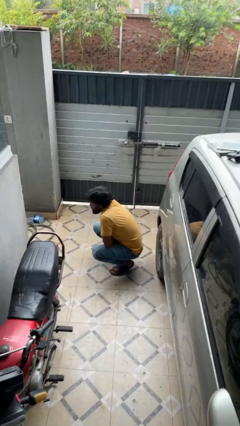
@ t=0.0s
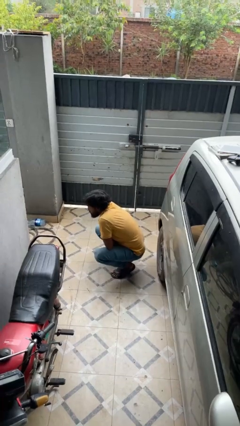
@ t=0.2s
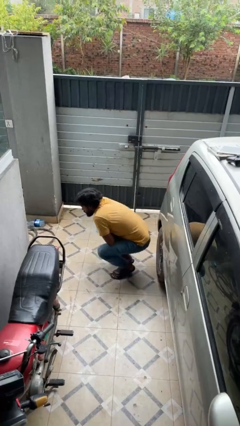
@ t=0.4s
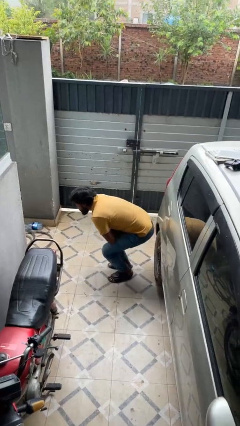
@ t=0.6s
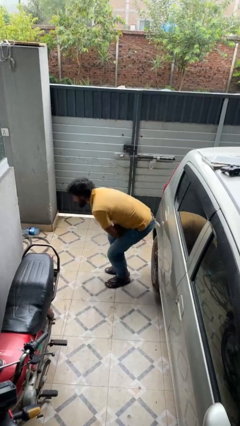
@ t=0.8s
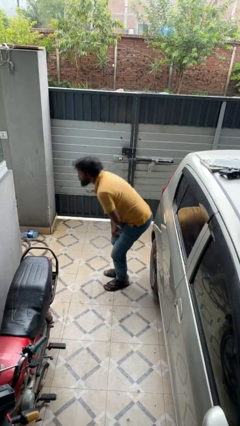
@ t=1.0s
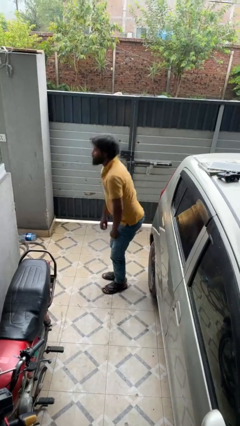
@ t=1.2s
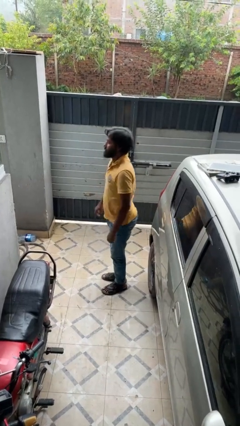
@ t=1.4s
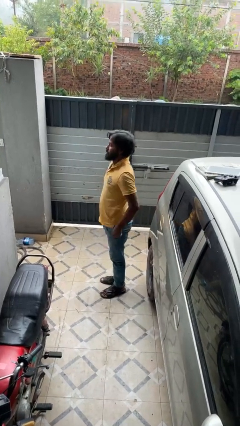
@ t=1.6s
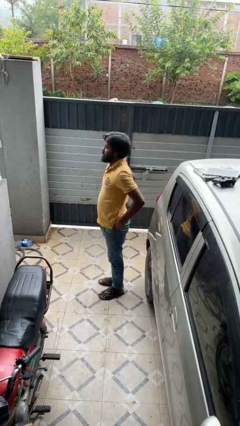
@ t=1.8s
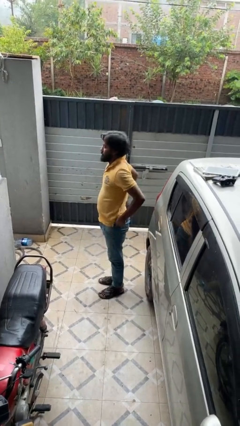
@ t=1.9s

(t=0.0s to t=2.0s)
person stands up

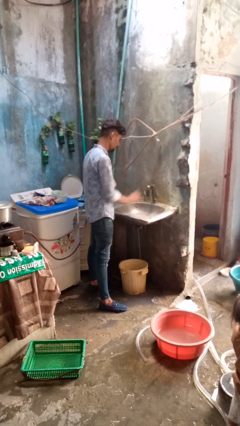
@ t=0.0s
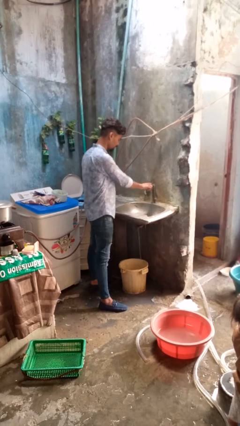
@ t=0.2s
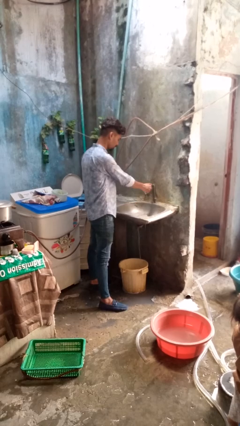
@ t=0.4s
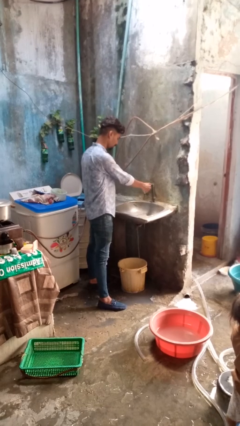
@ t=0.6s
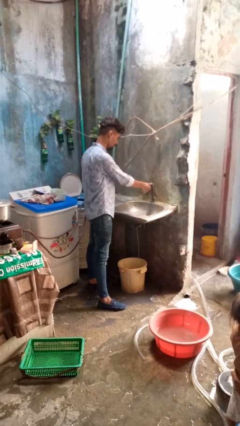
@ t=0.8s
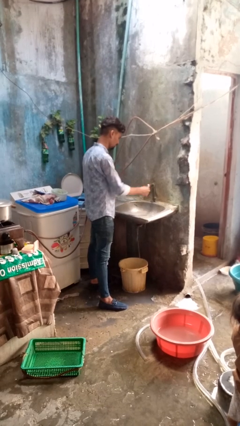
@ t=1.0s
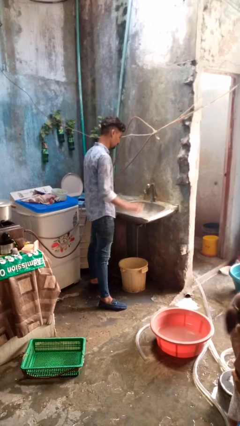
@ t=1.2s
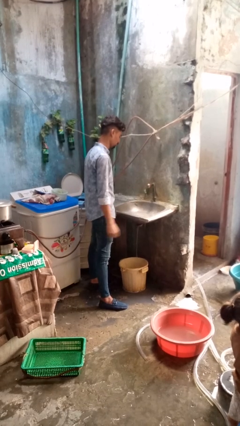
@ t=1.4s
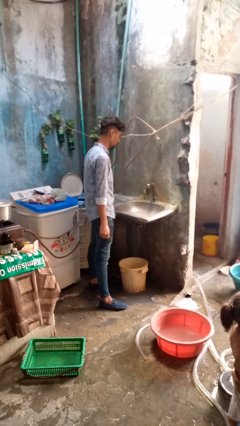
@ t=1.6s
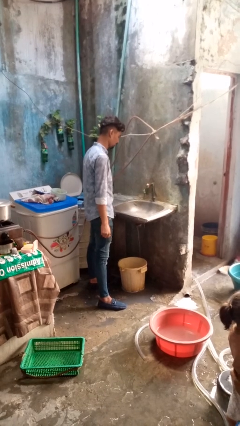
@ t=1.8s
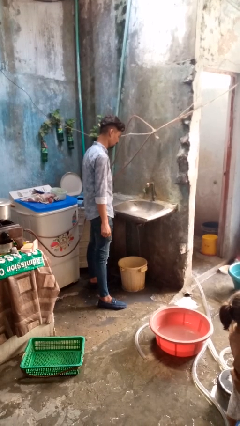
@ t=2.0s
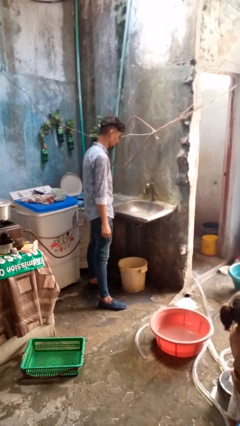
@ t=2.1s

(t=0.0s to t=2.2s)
person turns off faucet

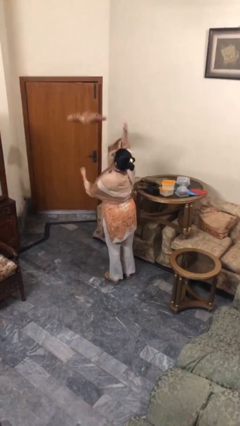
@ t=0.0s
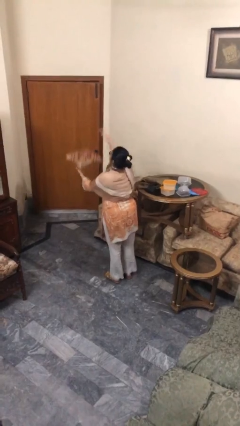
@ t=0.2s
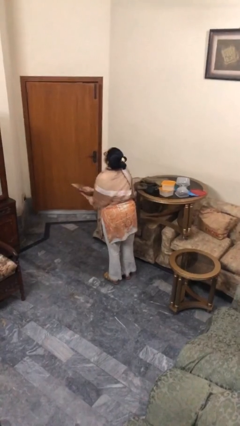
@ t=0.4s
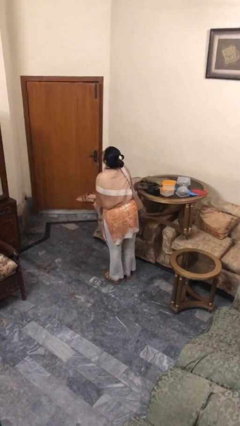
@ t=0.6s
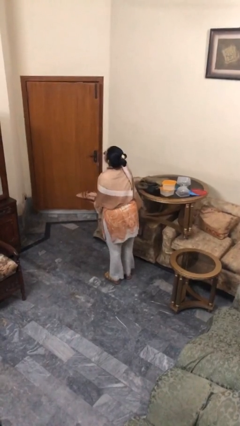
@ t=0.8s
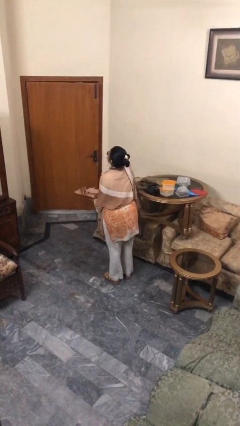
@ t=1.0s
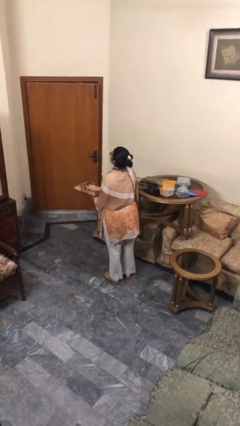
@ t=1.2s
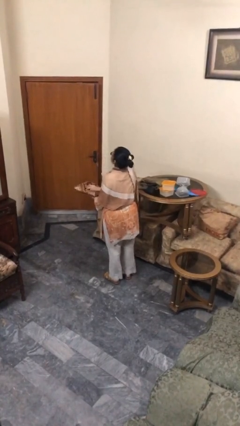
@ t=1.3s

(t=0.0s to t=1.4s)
person catches dropped object

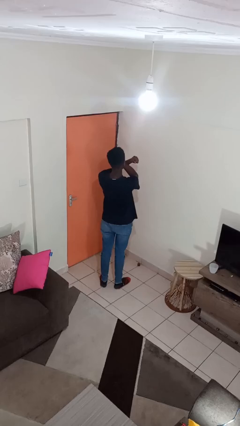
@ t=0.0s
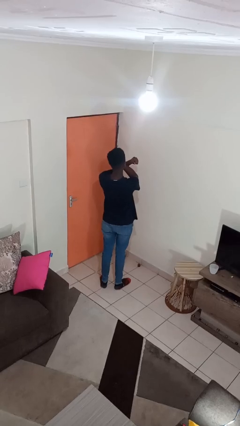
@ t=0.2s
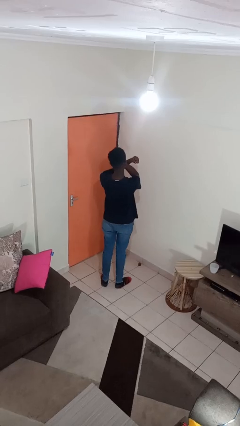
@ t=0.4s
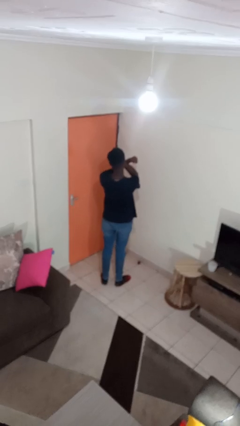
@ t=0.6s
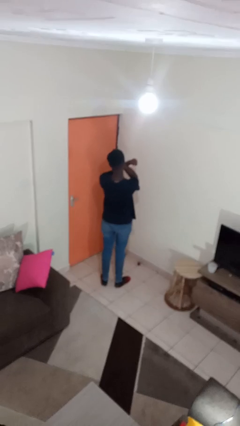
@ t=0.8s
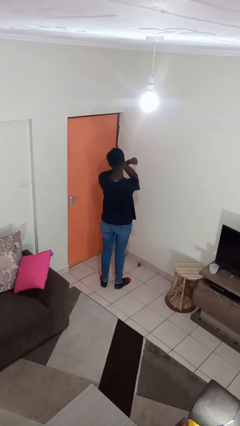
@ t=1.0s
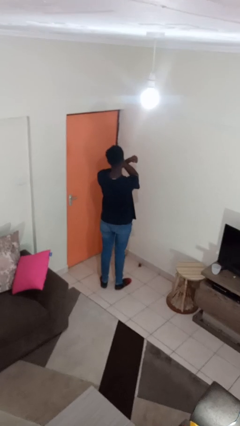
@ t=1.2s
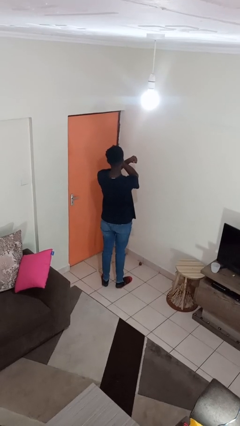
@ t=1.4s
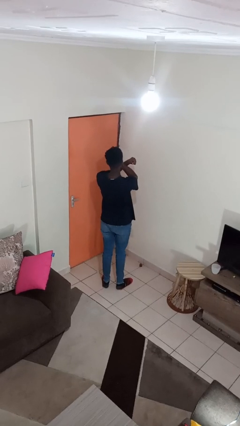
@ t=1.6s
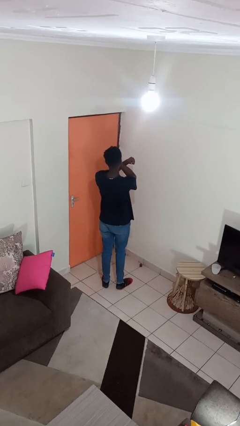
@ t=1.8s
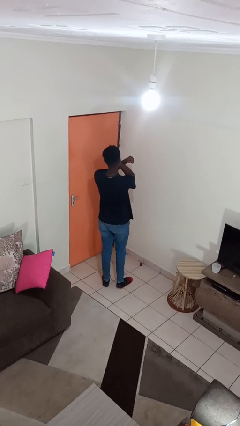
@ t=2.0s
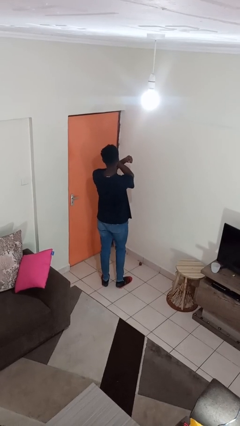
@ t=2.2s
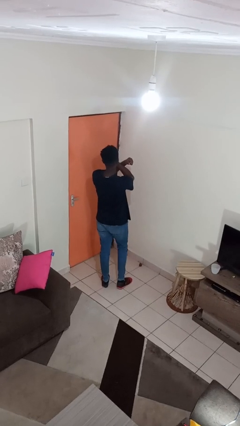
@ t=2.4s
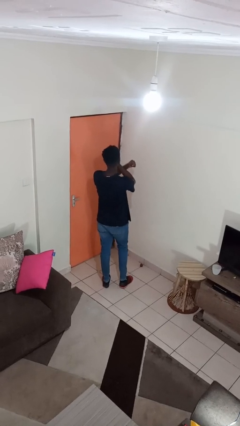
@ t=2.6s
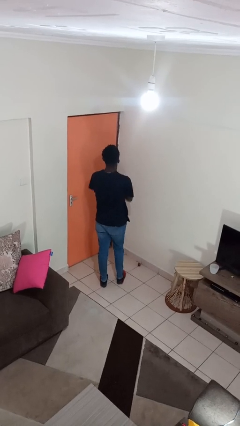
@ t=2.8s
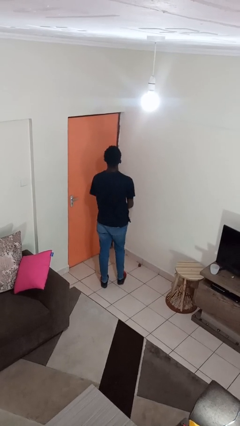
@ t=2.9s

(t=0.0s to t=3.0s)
person gestures arms x

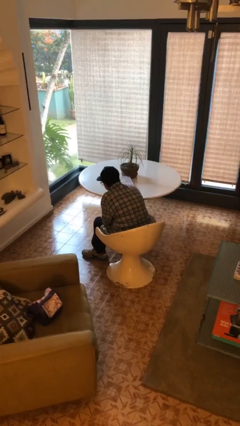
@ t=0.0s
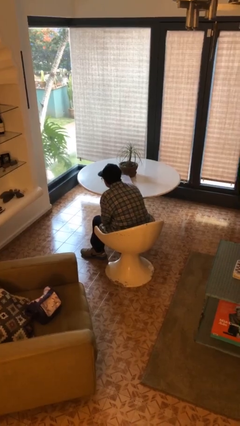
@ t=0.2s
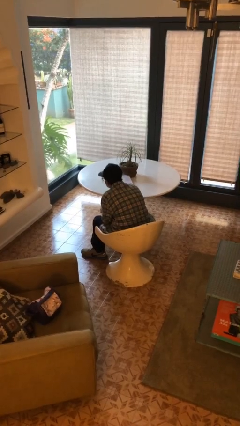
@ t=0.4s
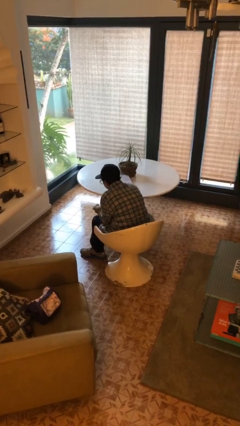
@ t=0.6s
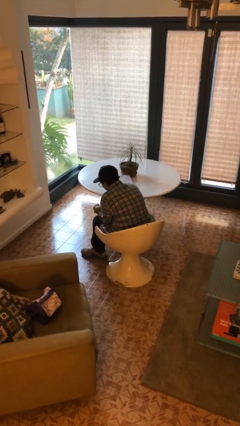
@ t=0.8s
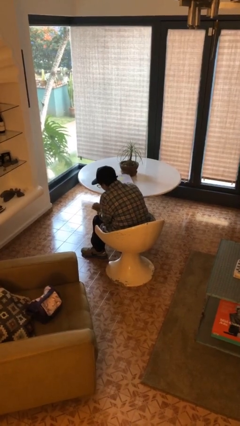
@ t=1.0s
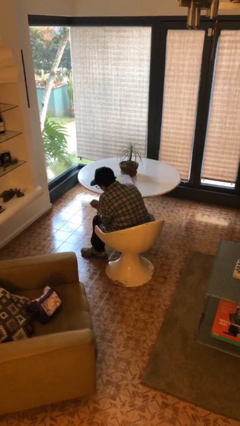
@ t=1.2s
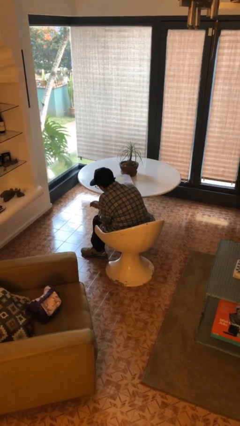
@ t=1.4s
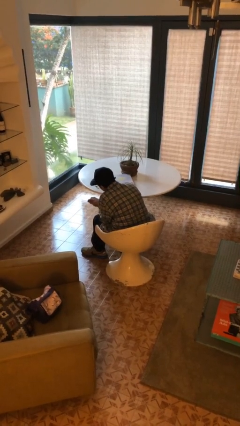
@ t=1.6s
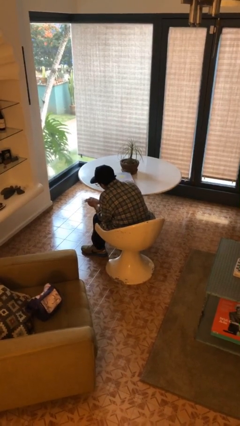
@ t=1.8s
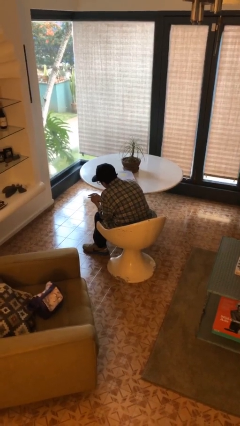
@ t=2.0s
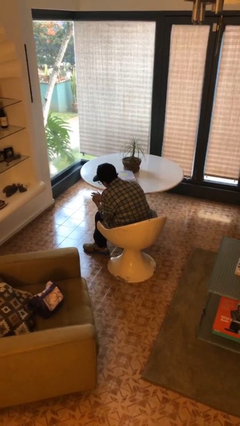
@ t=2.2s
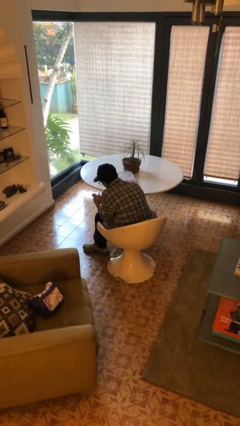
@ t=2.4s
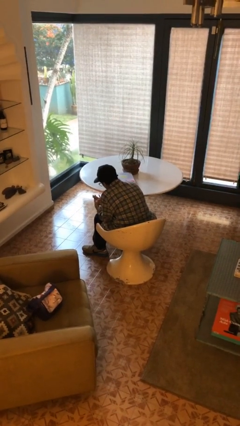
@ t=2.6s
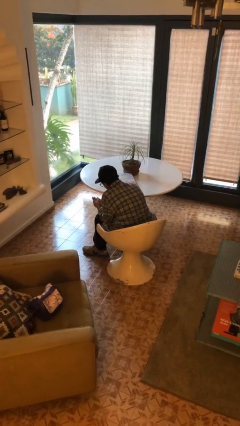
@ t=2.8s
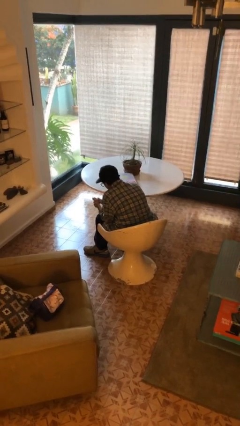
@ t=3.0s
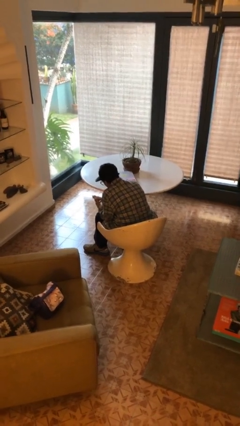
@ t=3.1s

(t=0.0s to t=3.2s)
person looks at hands in lap

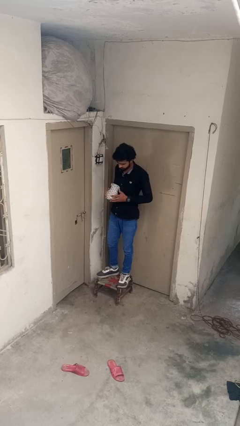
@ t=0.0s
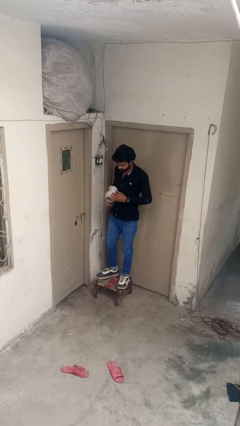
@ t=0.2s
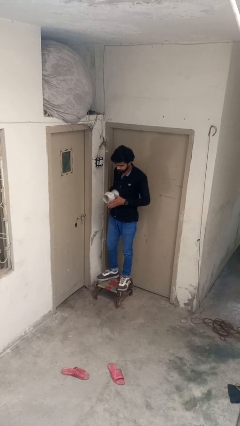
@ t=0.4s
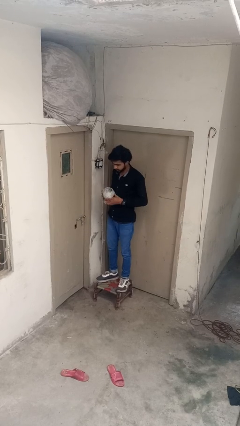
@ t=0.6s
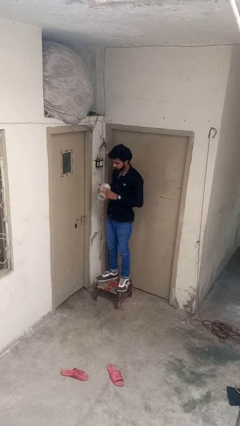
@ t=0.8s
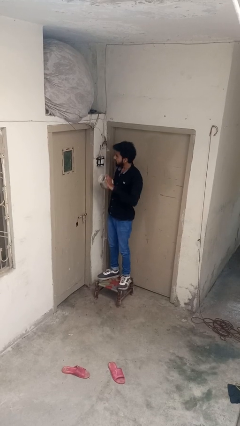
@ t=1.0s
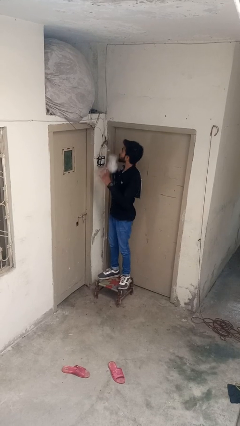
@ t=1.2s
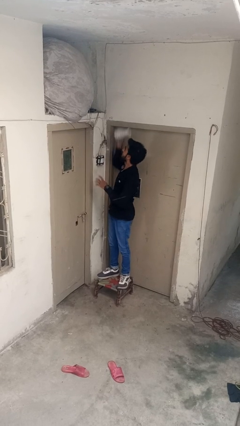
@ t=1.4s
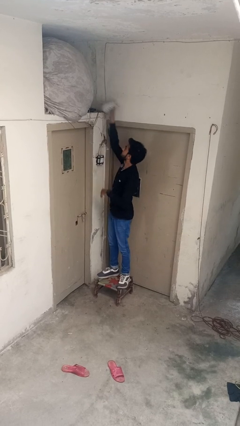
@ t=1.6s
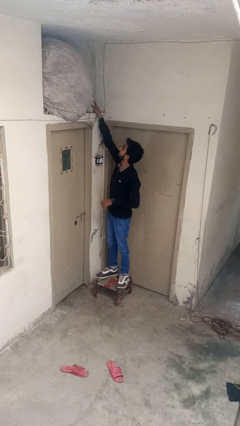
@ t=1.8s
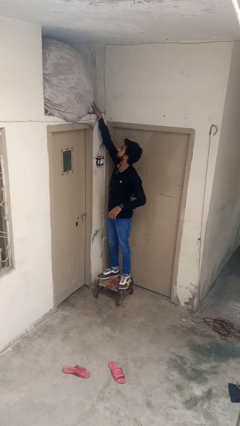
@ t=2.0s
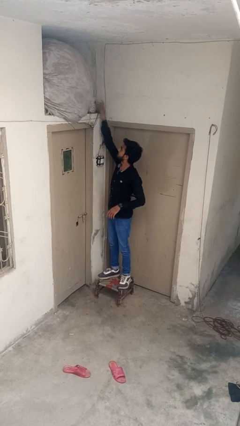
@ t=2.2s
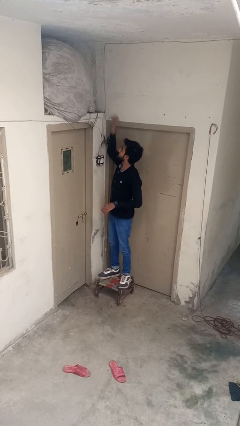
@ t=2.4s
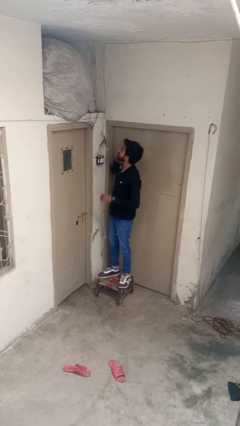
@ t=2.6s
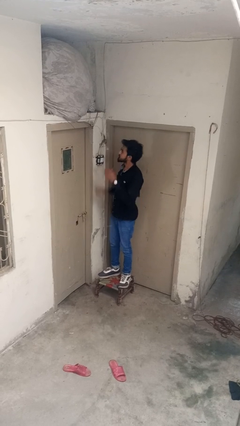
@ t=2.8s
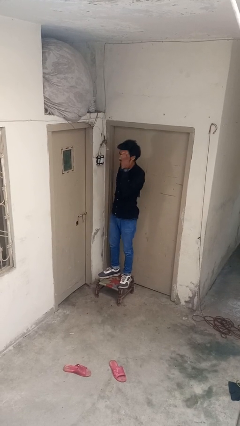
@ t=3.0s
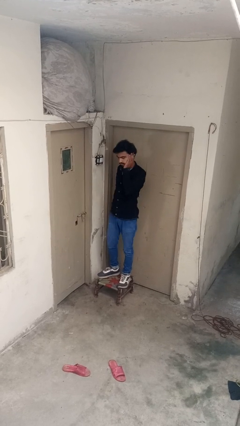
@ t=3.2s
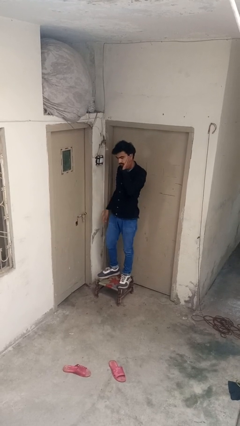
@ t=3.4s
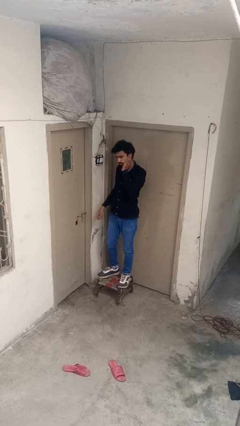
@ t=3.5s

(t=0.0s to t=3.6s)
person puts down object on shelf

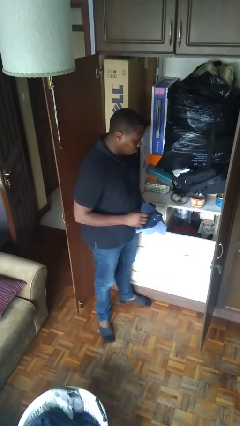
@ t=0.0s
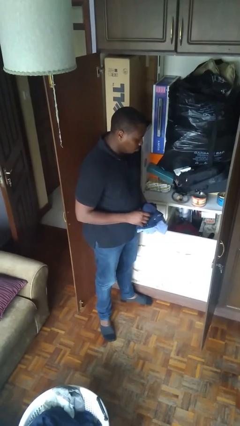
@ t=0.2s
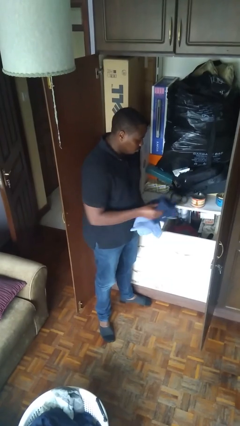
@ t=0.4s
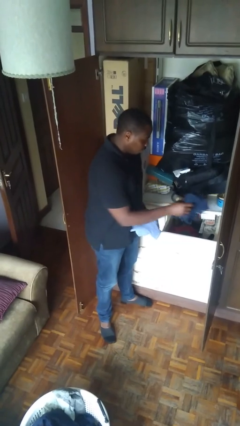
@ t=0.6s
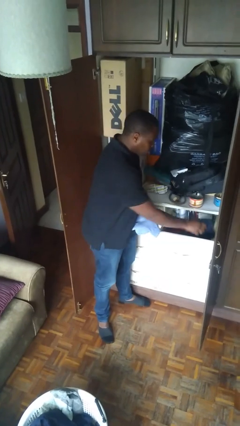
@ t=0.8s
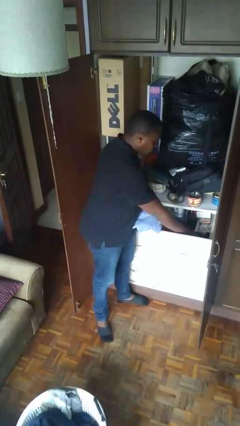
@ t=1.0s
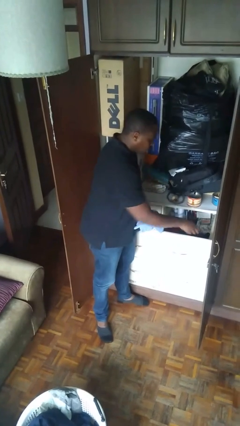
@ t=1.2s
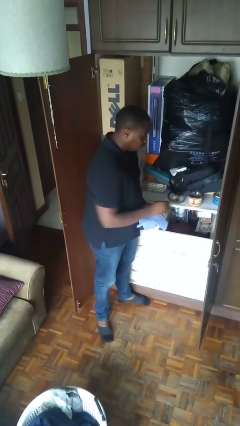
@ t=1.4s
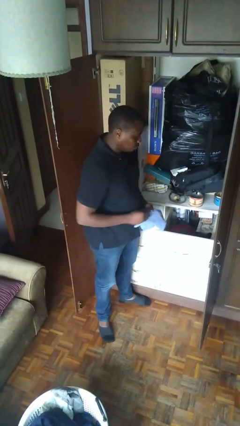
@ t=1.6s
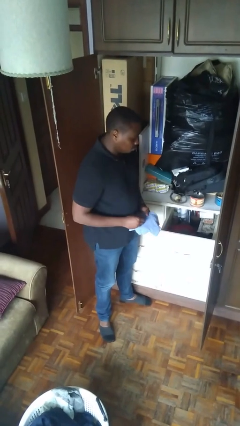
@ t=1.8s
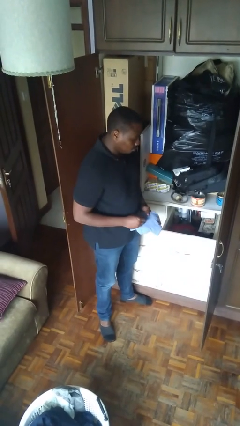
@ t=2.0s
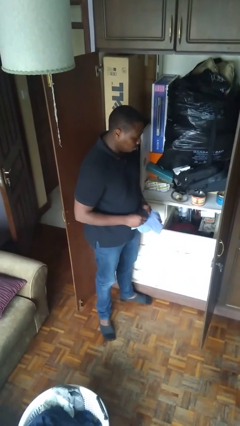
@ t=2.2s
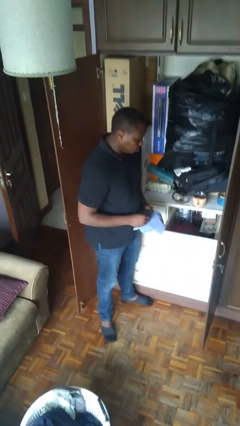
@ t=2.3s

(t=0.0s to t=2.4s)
person puts clothes into dresser
